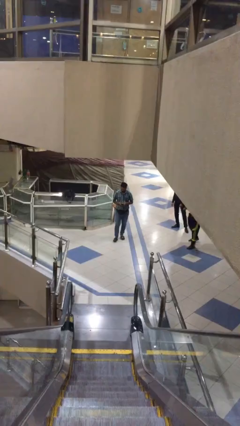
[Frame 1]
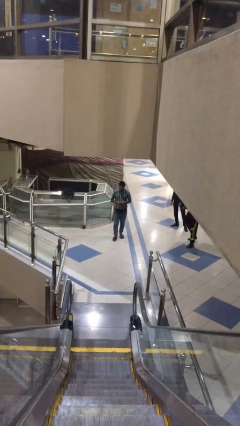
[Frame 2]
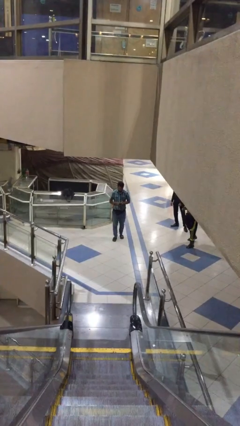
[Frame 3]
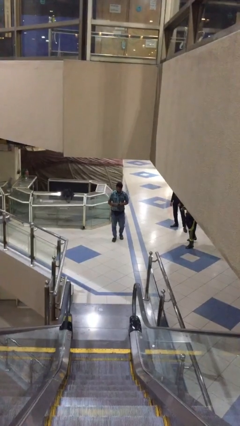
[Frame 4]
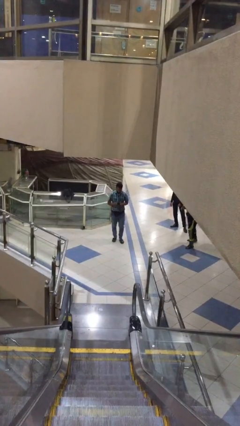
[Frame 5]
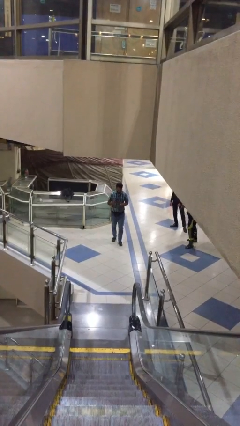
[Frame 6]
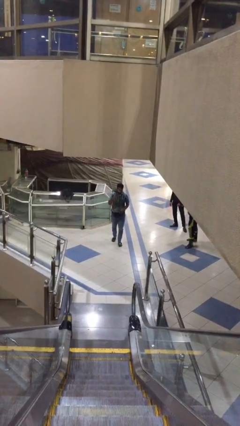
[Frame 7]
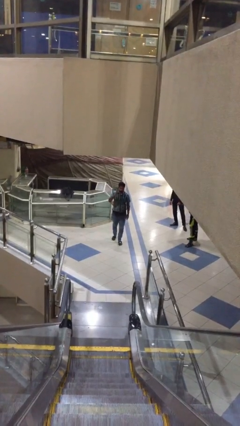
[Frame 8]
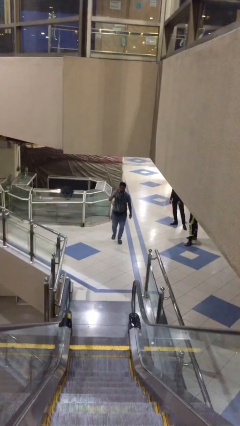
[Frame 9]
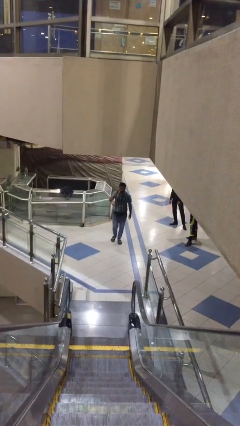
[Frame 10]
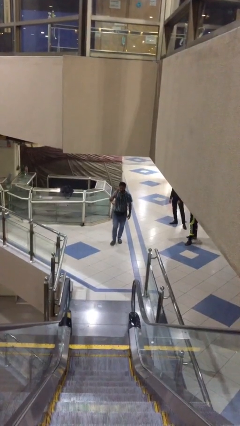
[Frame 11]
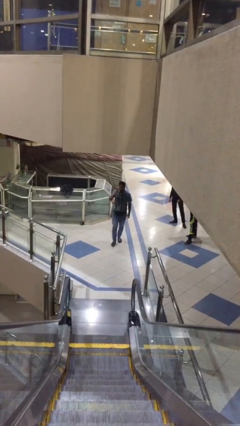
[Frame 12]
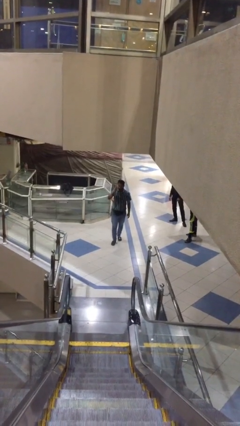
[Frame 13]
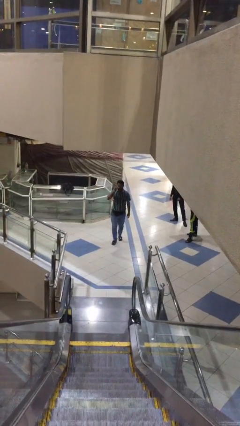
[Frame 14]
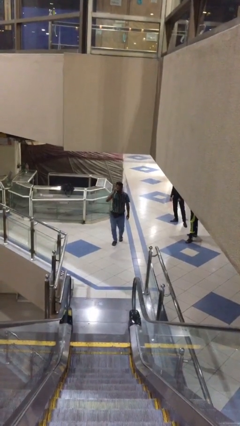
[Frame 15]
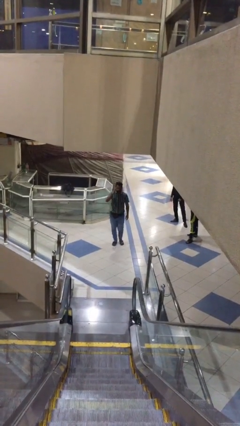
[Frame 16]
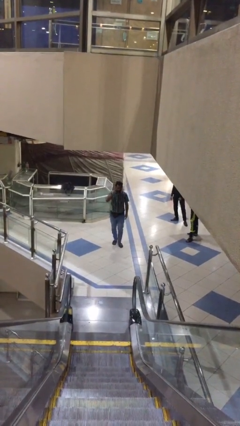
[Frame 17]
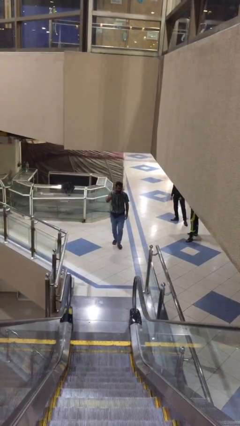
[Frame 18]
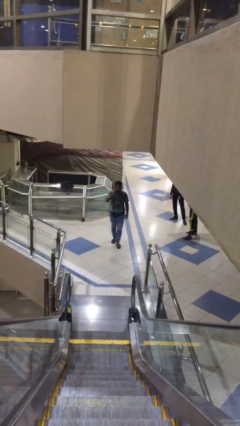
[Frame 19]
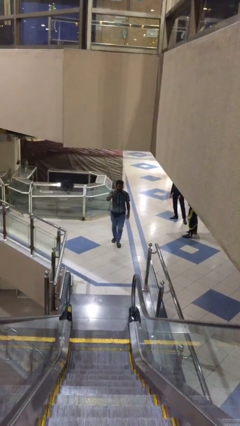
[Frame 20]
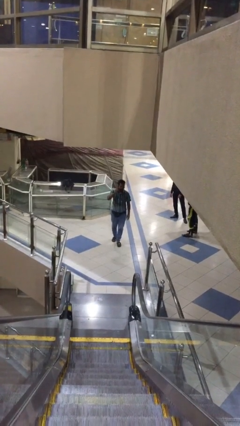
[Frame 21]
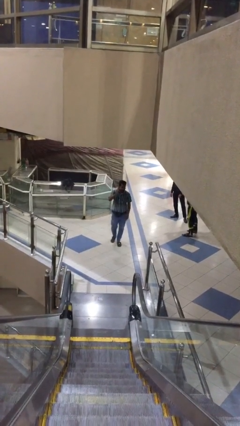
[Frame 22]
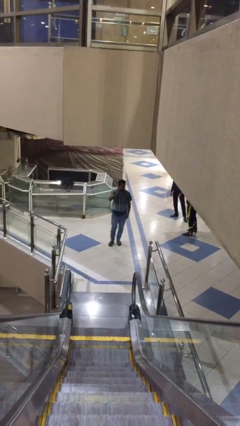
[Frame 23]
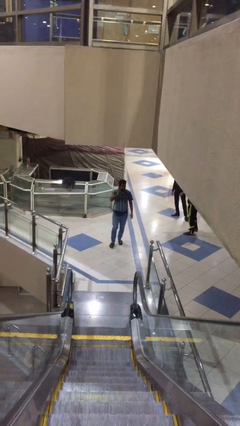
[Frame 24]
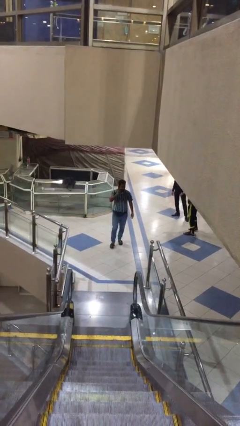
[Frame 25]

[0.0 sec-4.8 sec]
person talks on phone

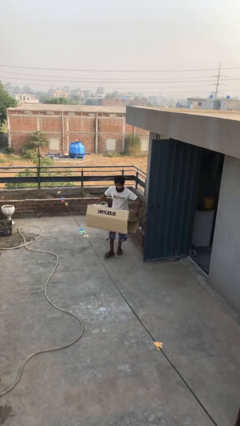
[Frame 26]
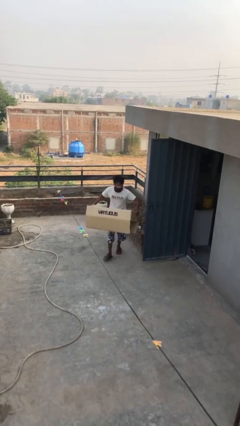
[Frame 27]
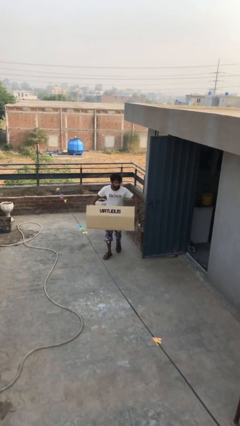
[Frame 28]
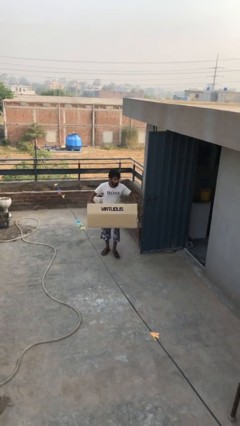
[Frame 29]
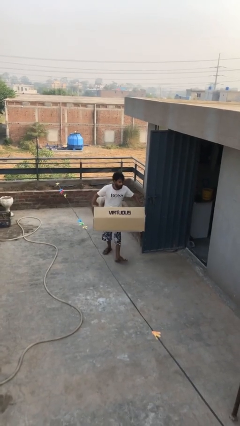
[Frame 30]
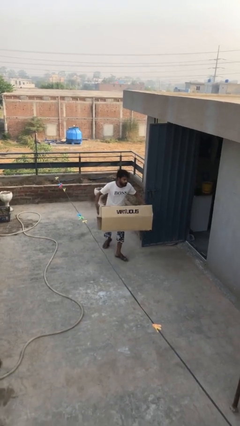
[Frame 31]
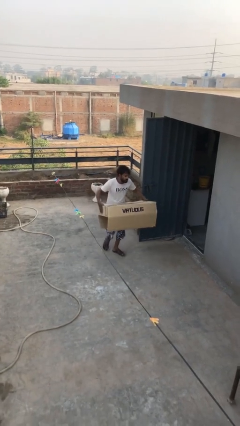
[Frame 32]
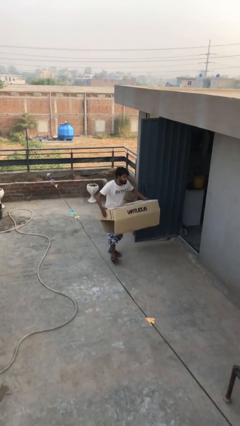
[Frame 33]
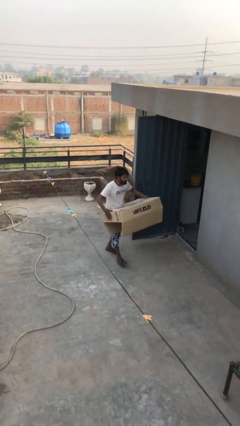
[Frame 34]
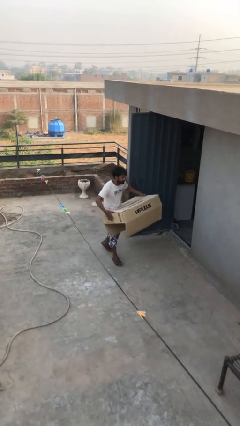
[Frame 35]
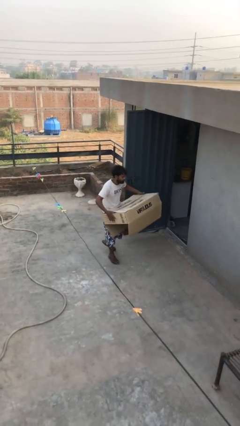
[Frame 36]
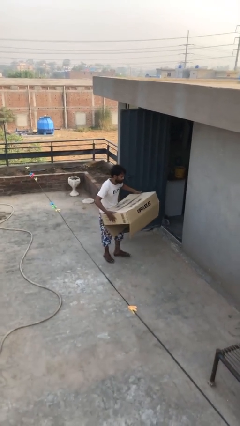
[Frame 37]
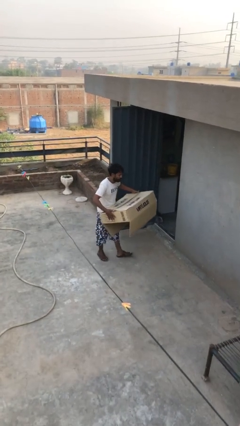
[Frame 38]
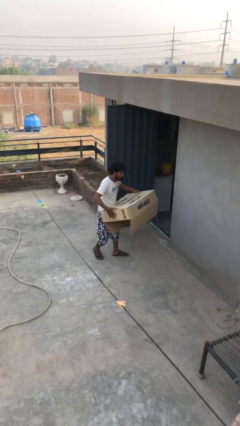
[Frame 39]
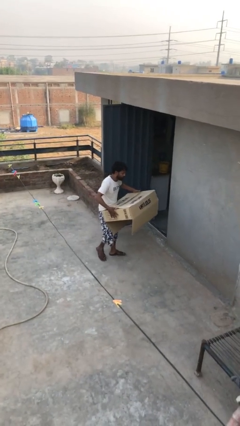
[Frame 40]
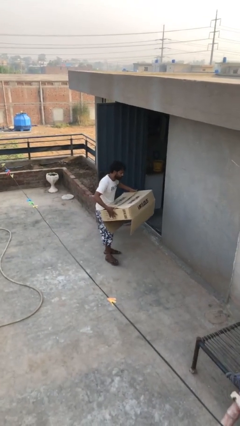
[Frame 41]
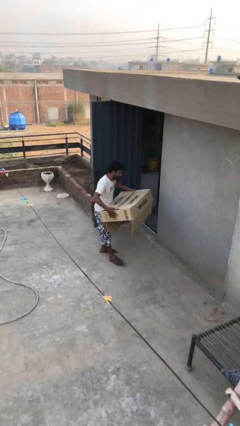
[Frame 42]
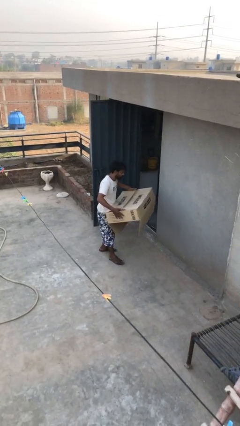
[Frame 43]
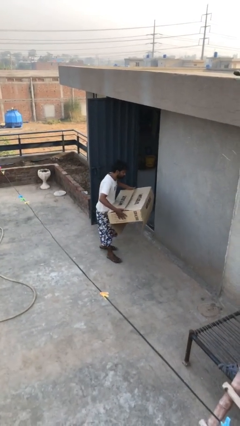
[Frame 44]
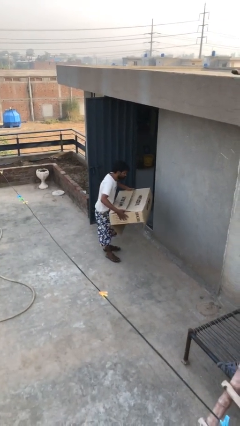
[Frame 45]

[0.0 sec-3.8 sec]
person carries heavy object

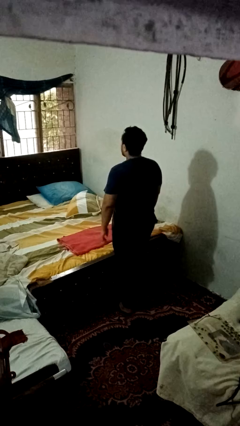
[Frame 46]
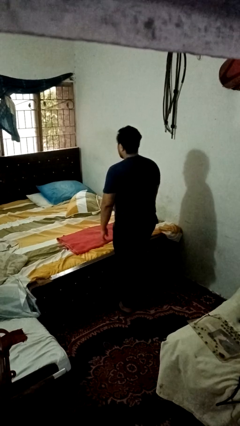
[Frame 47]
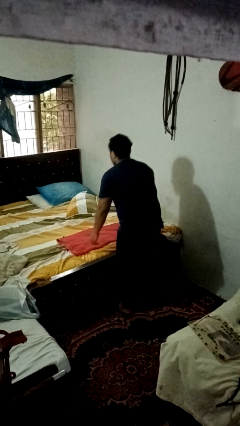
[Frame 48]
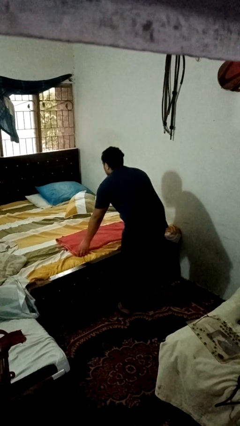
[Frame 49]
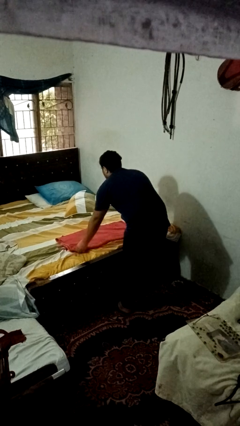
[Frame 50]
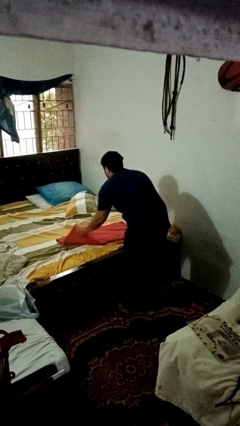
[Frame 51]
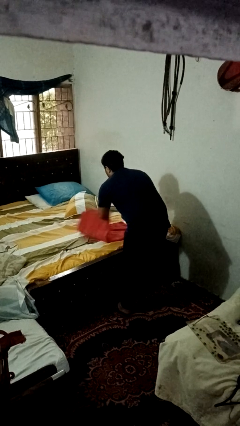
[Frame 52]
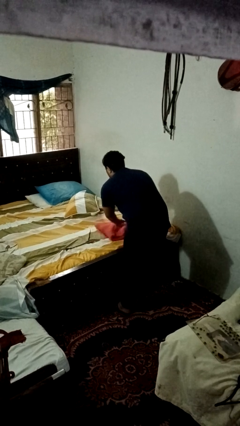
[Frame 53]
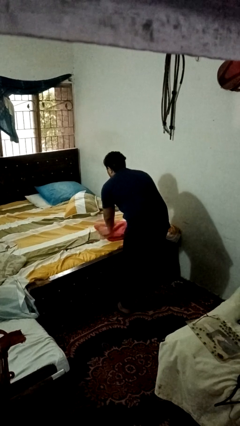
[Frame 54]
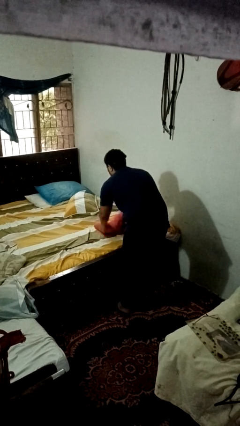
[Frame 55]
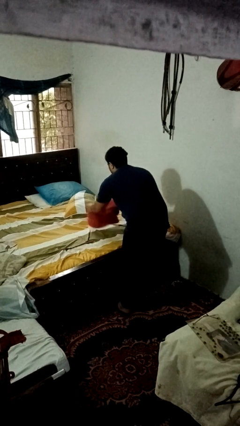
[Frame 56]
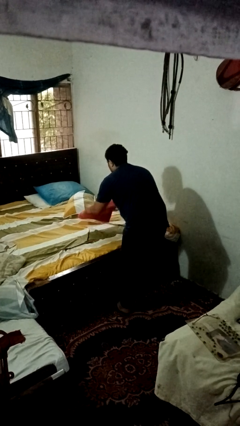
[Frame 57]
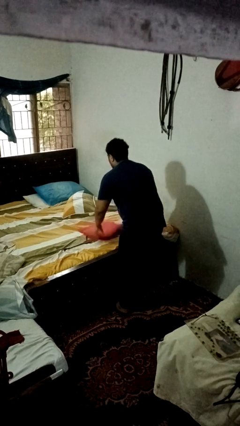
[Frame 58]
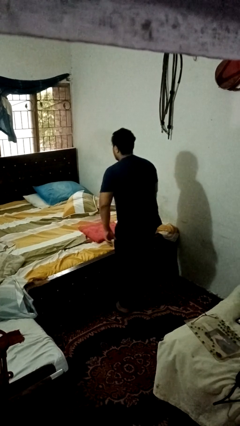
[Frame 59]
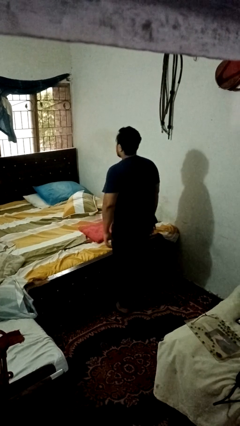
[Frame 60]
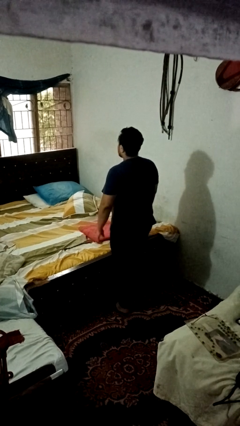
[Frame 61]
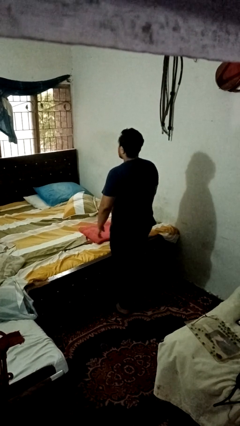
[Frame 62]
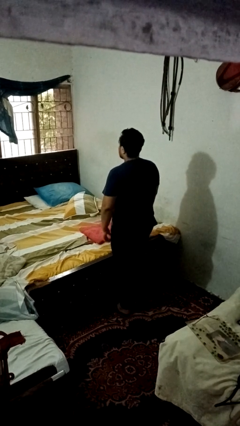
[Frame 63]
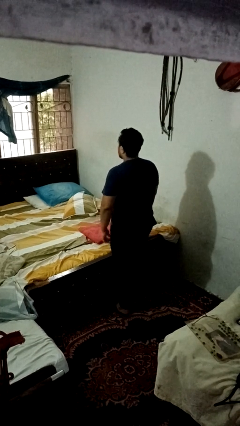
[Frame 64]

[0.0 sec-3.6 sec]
person folds towel

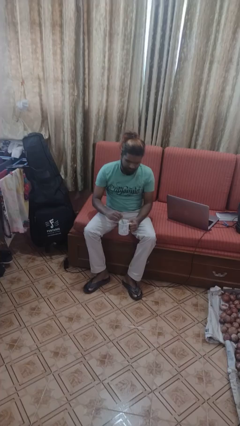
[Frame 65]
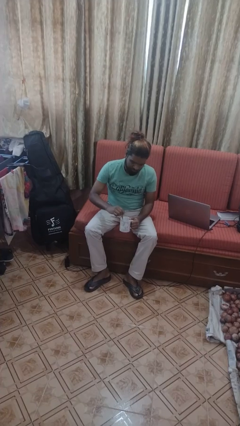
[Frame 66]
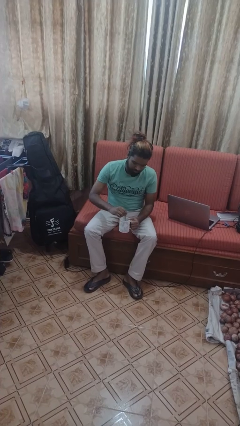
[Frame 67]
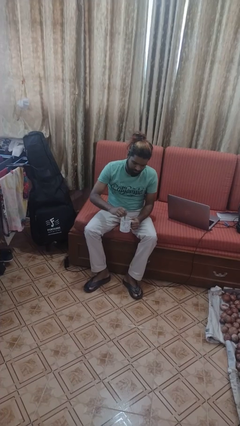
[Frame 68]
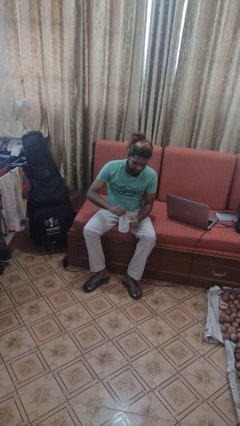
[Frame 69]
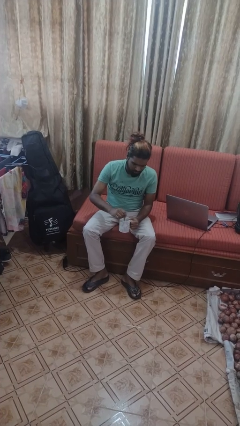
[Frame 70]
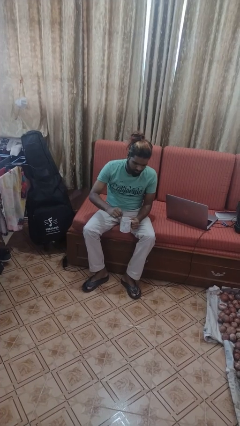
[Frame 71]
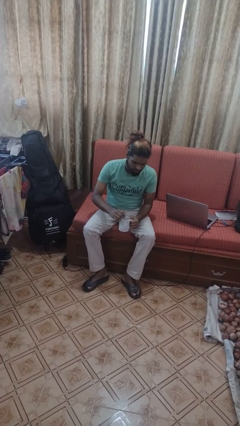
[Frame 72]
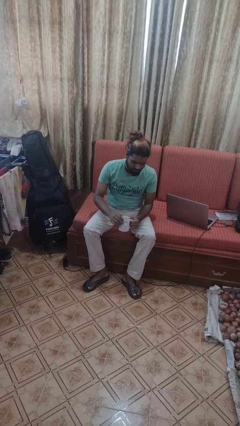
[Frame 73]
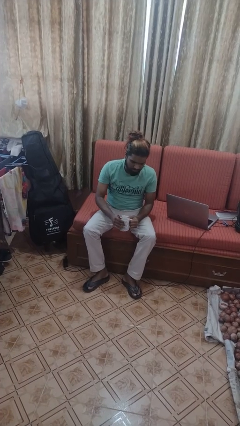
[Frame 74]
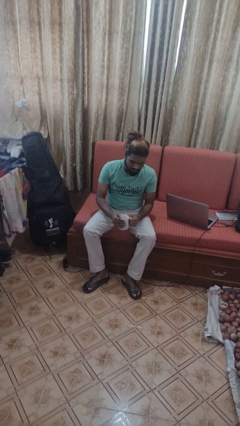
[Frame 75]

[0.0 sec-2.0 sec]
person stirs mug

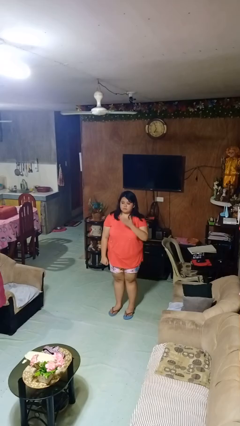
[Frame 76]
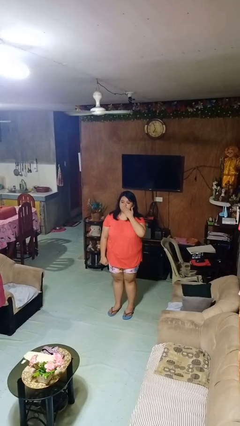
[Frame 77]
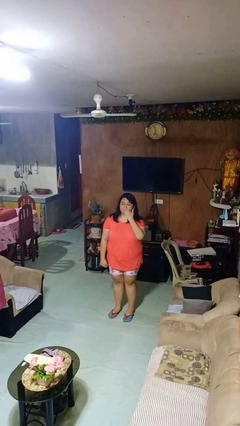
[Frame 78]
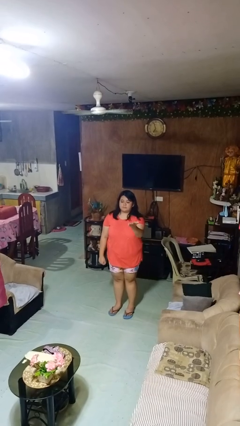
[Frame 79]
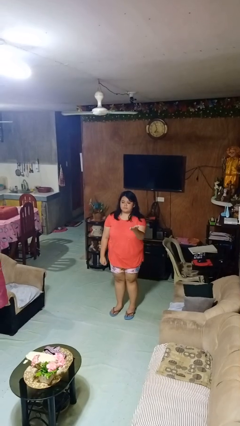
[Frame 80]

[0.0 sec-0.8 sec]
person gestures blow kiss

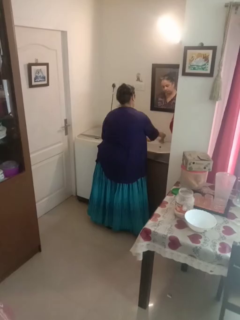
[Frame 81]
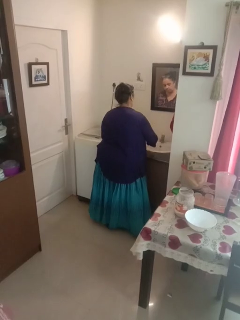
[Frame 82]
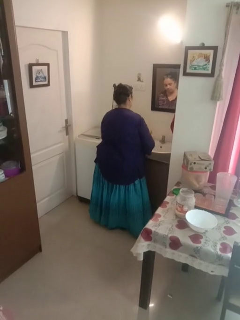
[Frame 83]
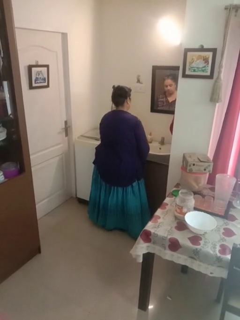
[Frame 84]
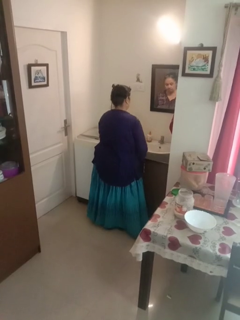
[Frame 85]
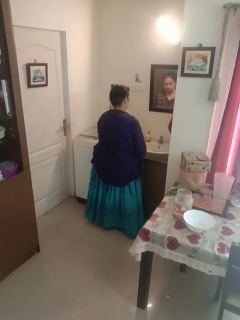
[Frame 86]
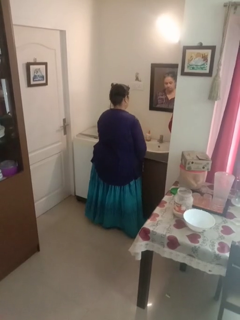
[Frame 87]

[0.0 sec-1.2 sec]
person turns off faucet

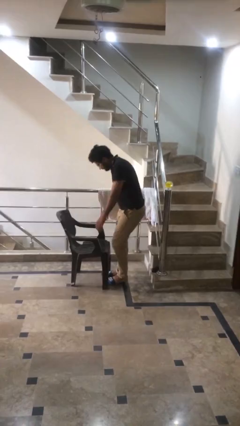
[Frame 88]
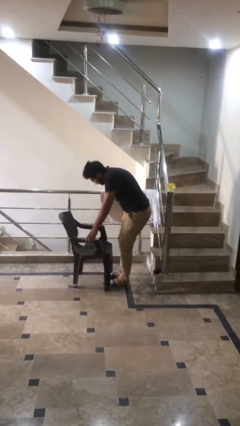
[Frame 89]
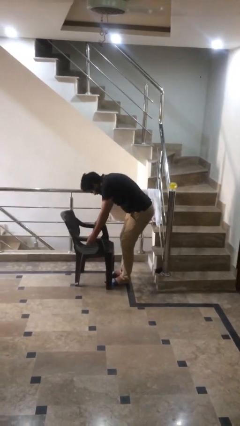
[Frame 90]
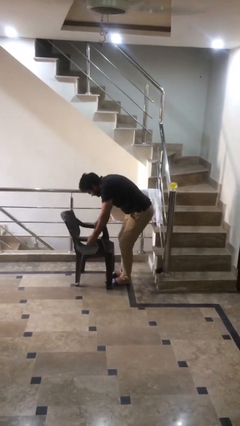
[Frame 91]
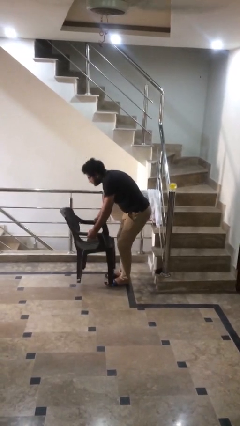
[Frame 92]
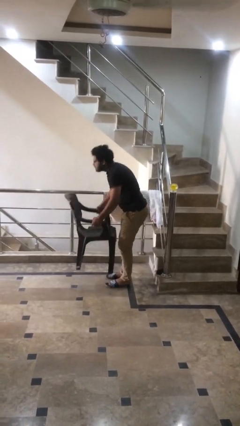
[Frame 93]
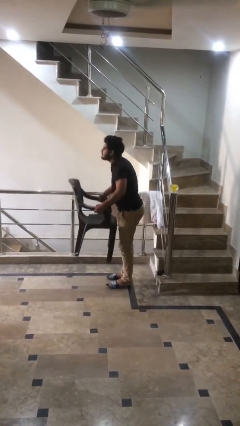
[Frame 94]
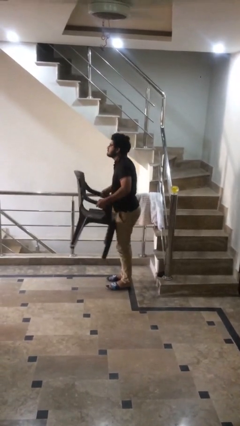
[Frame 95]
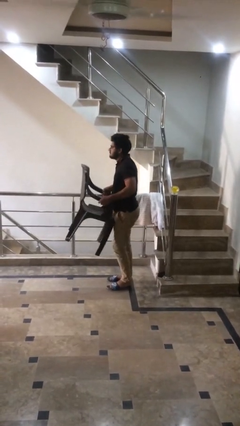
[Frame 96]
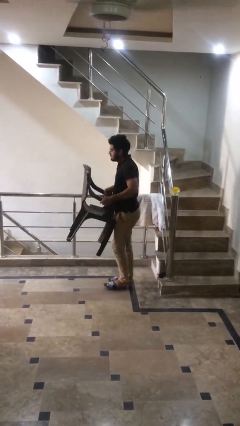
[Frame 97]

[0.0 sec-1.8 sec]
person picks up object from floor
